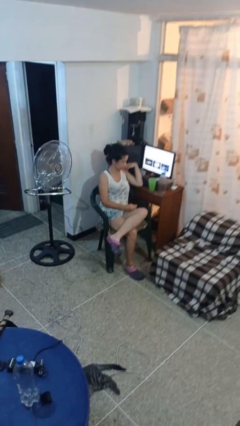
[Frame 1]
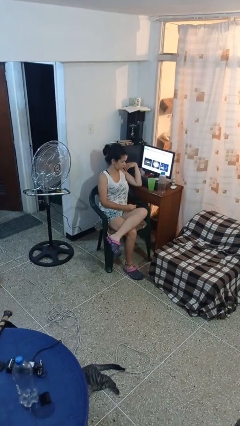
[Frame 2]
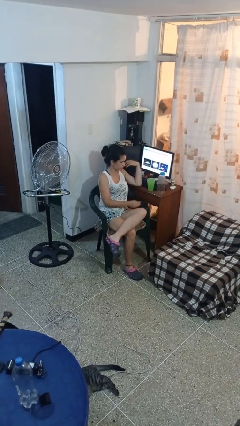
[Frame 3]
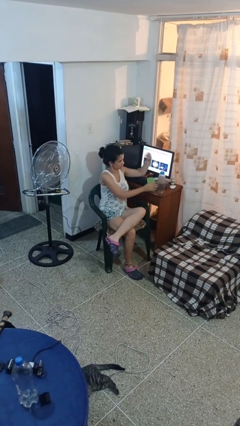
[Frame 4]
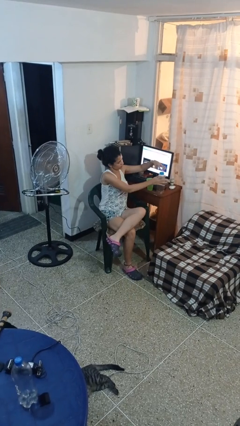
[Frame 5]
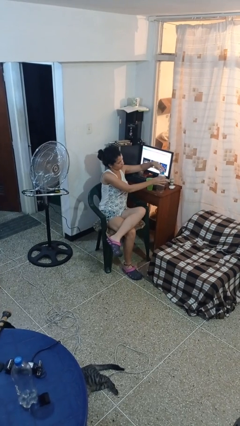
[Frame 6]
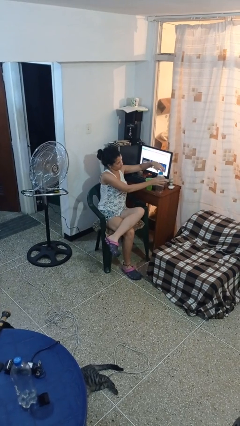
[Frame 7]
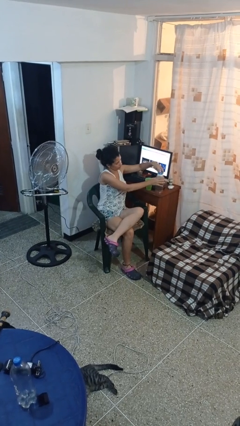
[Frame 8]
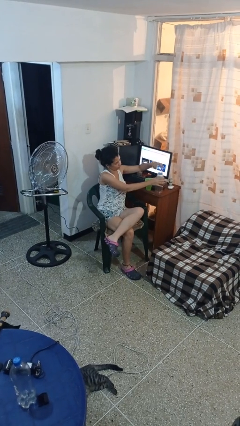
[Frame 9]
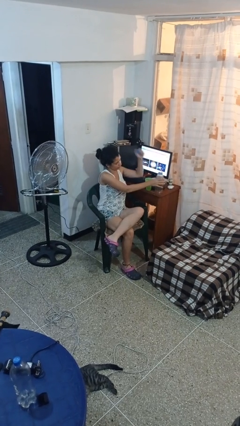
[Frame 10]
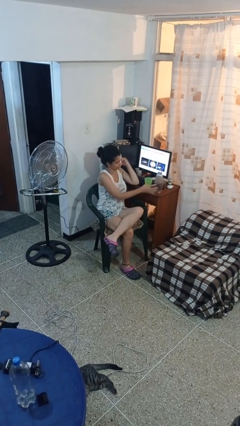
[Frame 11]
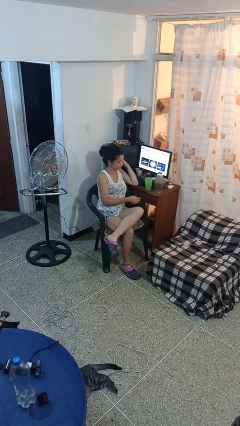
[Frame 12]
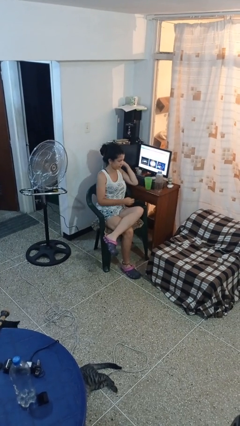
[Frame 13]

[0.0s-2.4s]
person unscrews lid from bottle

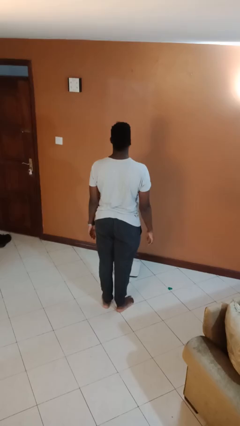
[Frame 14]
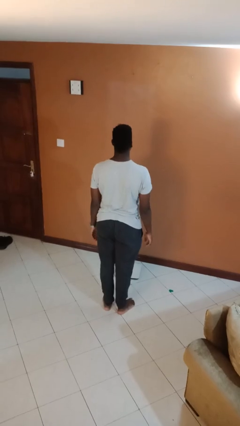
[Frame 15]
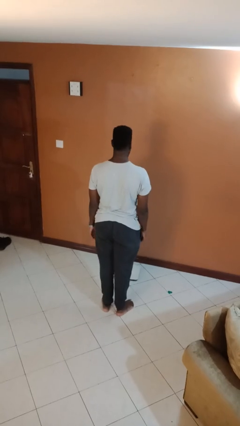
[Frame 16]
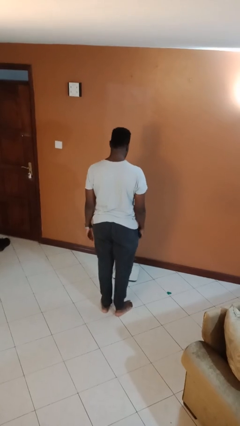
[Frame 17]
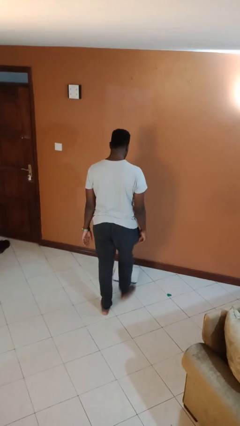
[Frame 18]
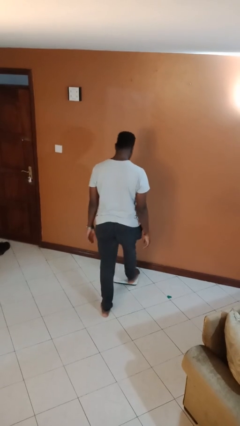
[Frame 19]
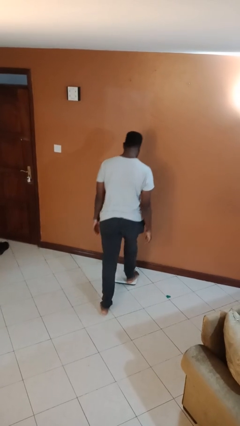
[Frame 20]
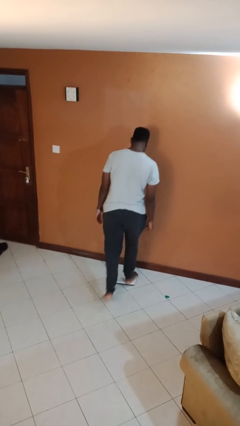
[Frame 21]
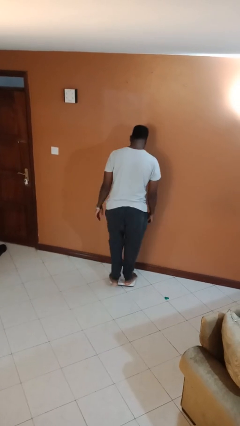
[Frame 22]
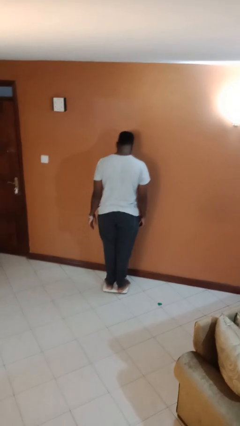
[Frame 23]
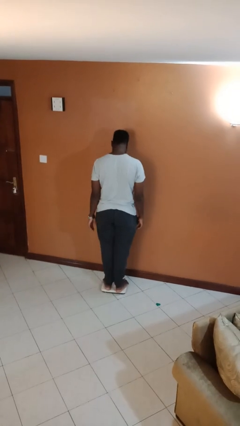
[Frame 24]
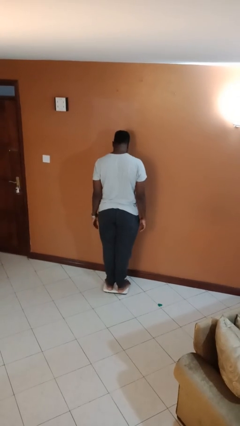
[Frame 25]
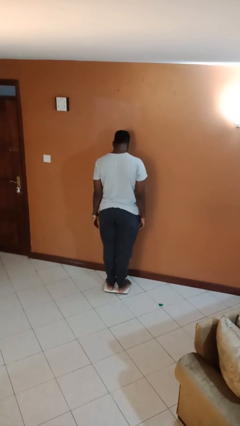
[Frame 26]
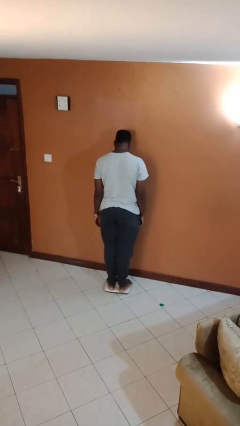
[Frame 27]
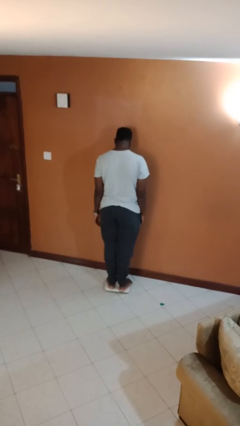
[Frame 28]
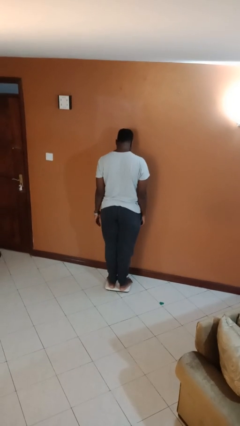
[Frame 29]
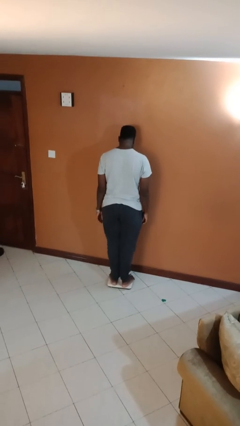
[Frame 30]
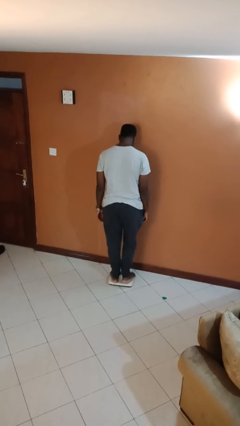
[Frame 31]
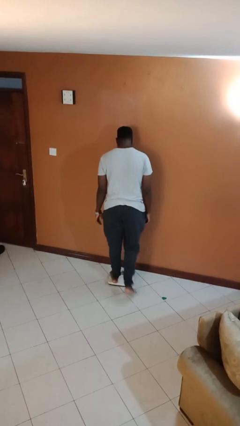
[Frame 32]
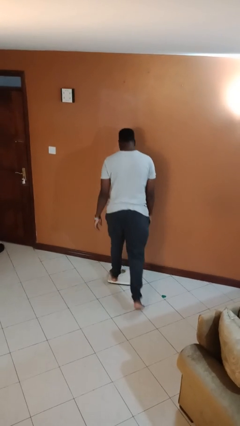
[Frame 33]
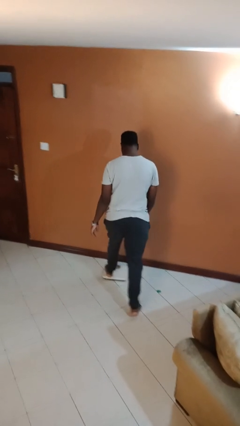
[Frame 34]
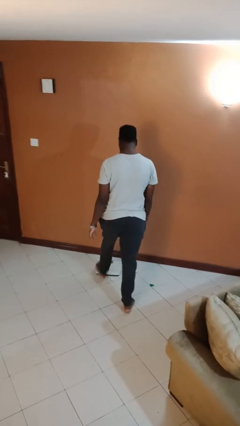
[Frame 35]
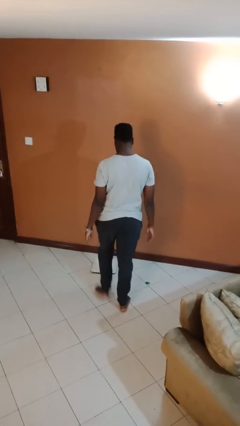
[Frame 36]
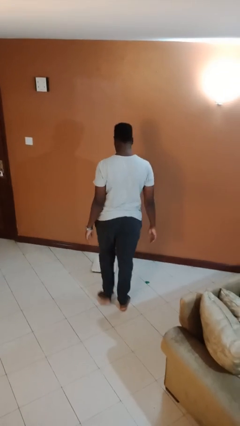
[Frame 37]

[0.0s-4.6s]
person uses bodyweight scale

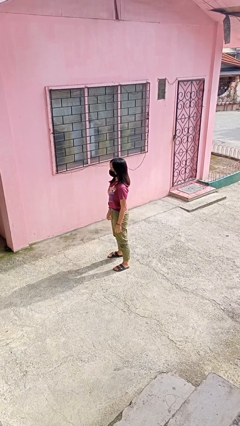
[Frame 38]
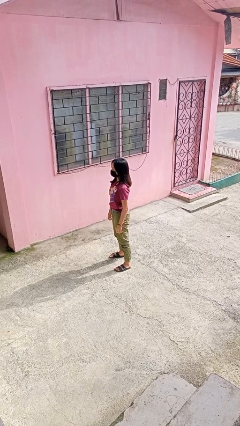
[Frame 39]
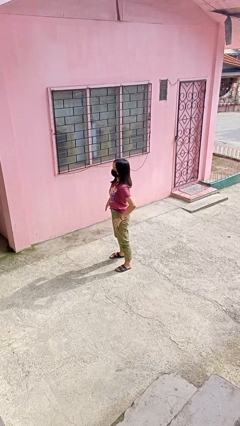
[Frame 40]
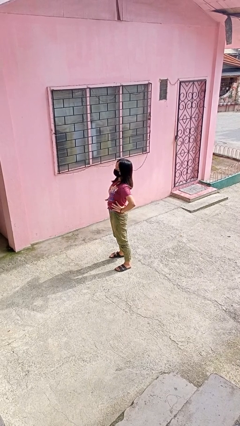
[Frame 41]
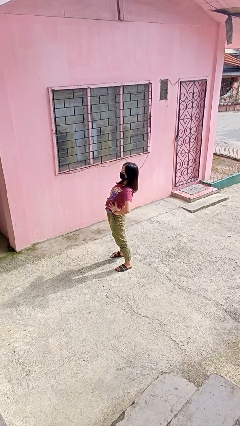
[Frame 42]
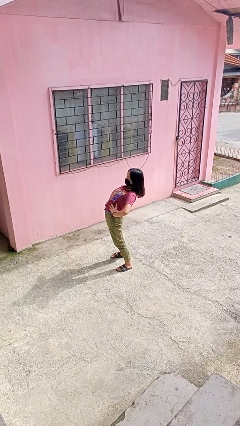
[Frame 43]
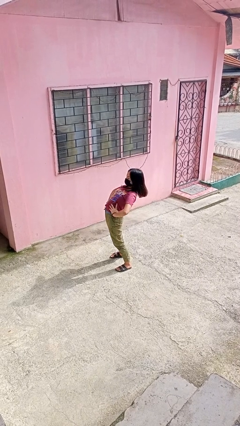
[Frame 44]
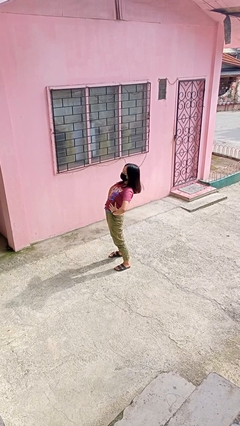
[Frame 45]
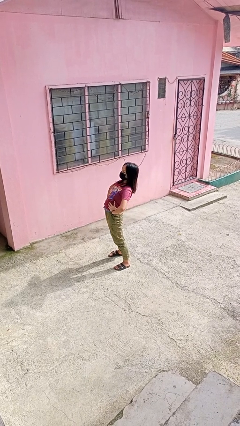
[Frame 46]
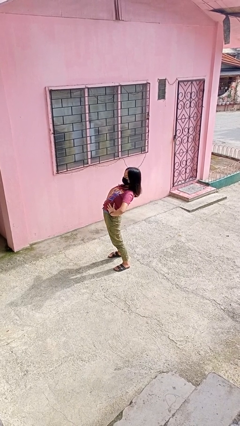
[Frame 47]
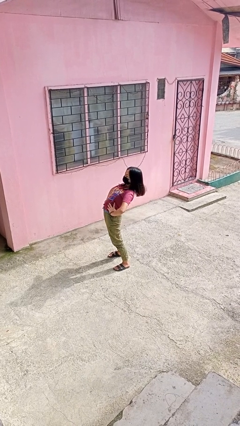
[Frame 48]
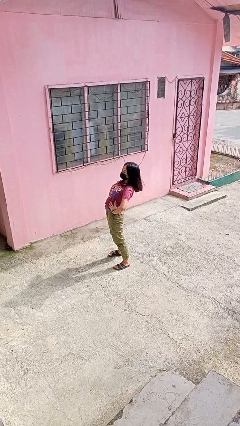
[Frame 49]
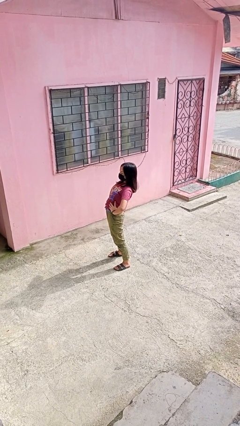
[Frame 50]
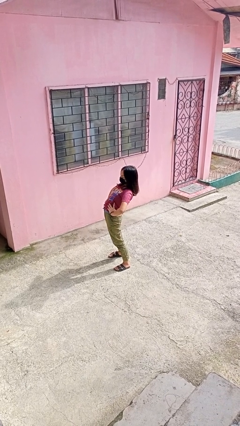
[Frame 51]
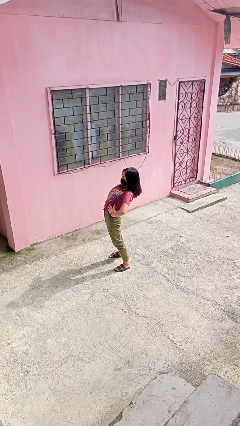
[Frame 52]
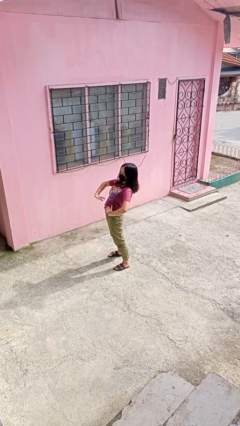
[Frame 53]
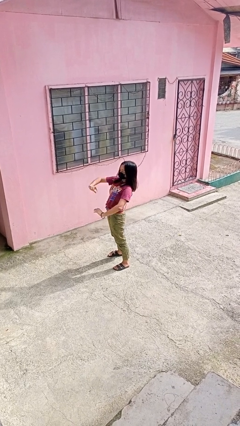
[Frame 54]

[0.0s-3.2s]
person stretches back

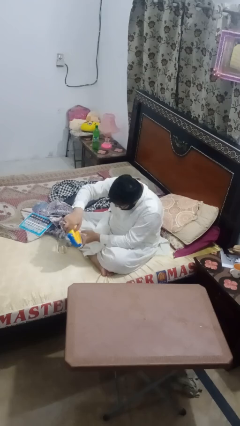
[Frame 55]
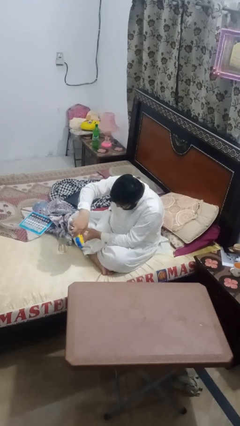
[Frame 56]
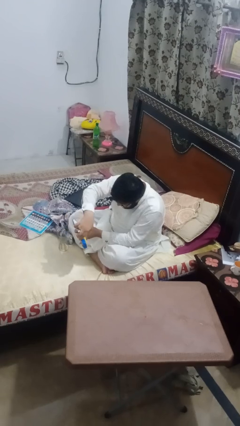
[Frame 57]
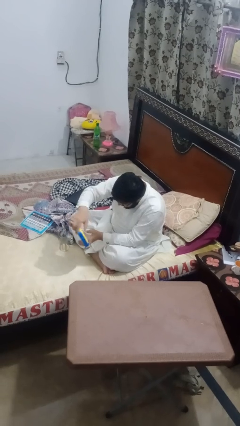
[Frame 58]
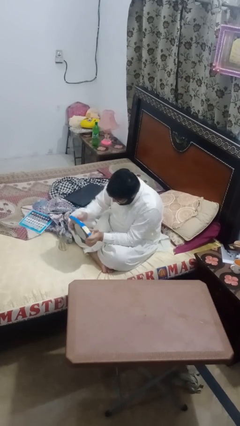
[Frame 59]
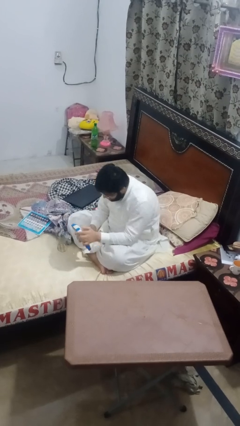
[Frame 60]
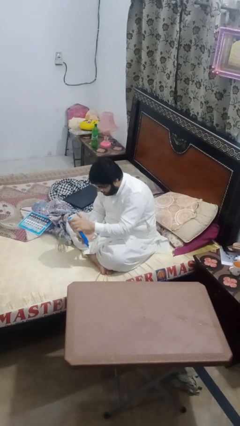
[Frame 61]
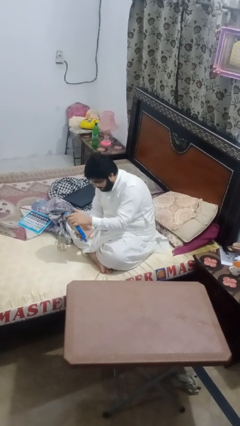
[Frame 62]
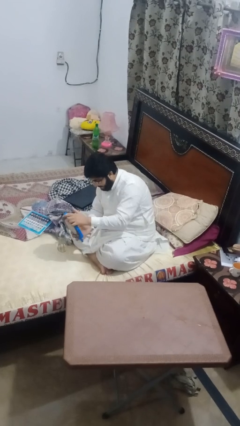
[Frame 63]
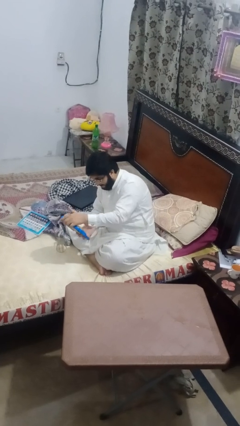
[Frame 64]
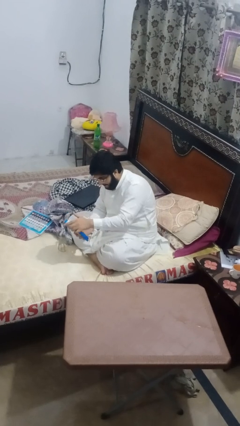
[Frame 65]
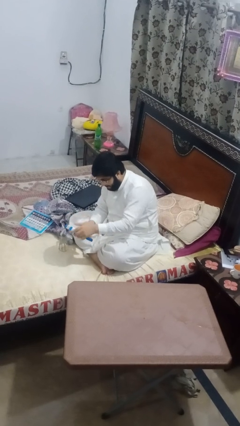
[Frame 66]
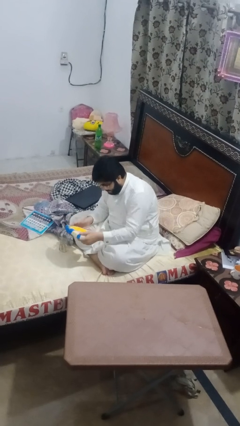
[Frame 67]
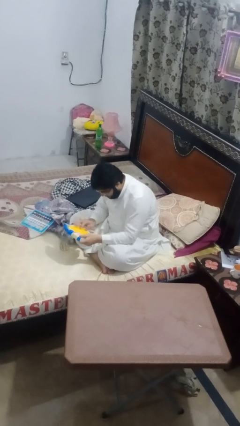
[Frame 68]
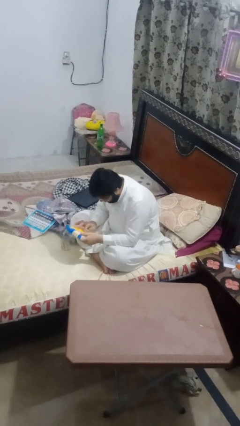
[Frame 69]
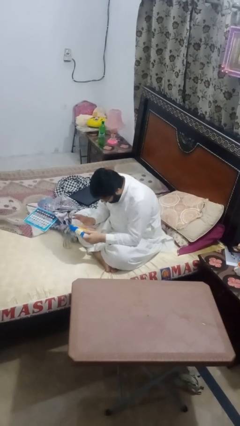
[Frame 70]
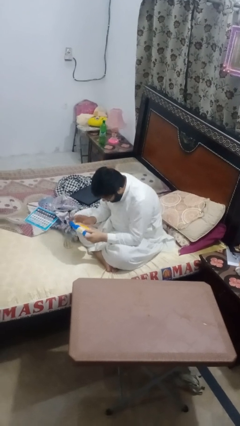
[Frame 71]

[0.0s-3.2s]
person interacts with handheld game

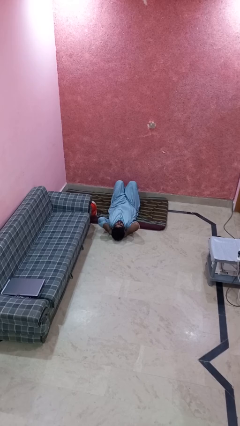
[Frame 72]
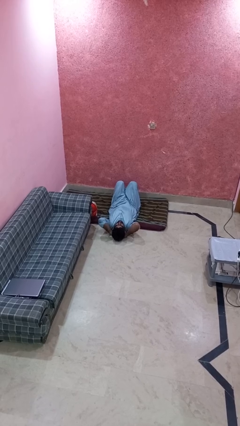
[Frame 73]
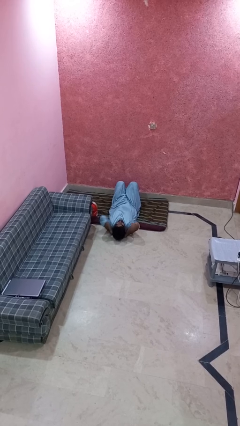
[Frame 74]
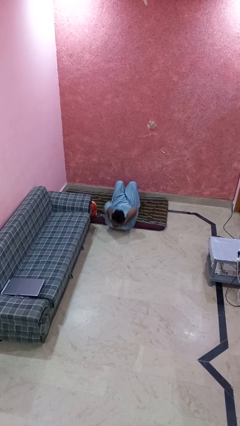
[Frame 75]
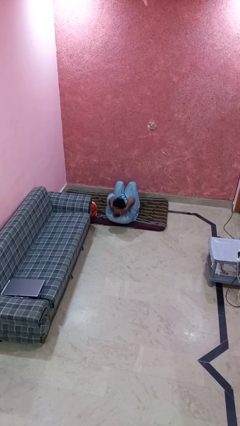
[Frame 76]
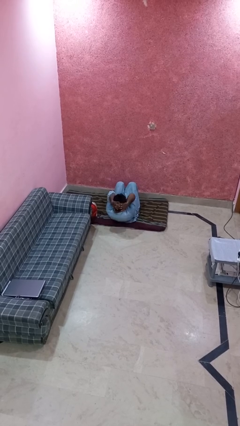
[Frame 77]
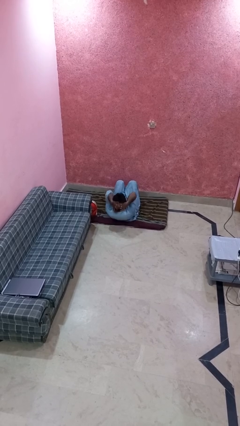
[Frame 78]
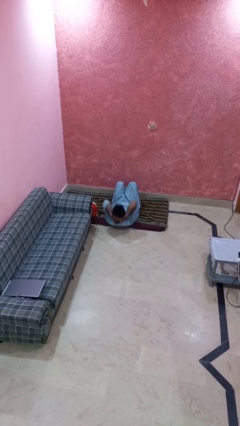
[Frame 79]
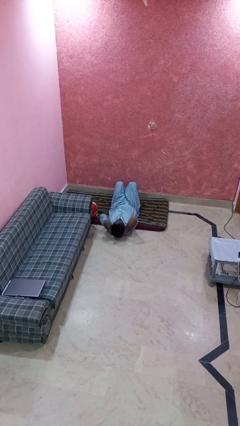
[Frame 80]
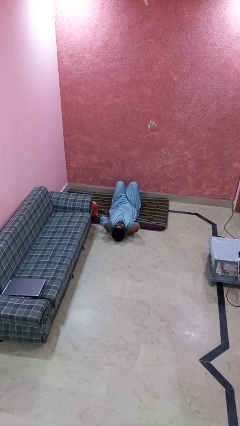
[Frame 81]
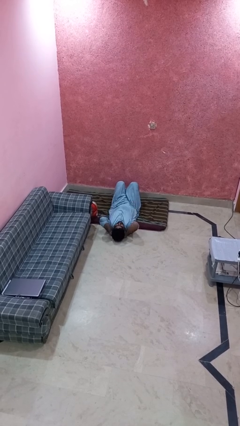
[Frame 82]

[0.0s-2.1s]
person exercises with situp

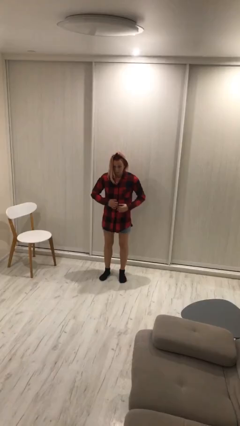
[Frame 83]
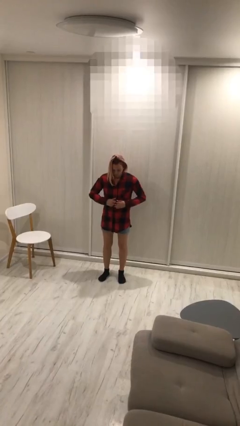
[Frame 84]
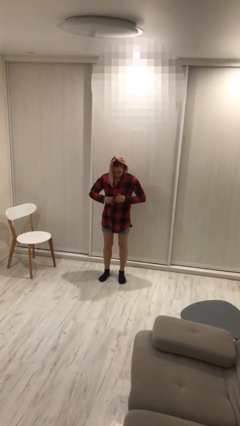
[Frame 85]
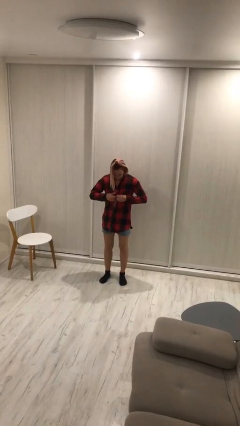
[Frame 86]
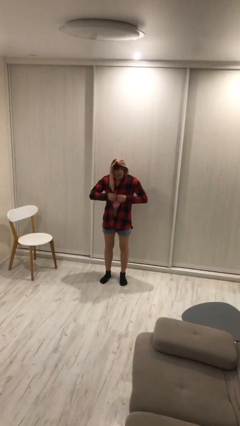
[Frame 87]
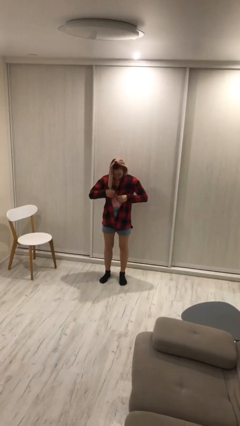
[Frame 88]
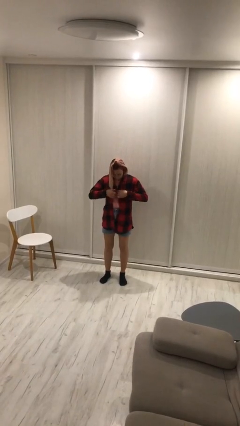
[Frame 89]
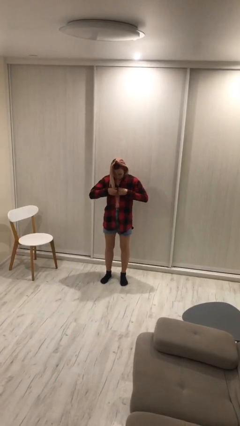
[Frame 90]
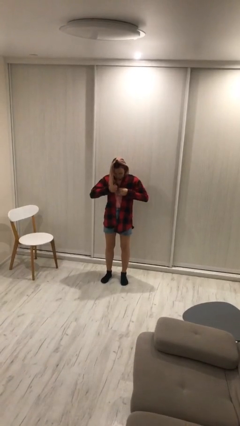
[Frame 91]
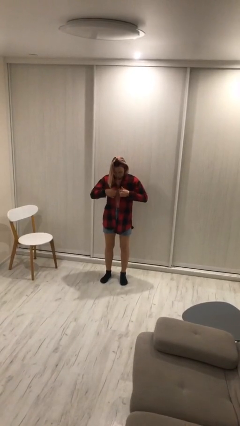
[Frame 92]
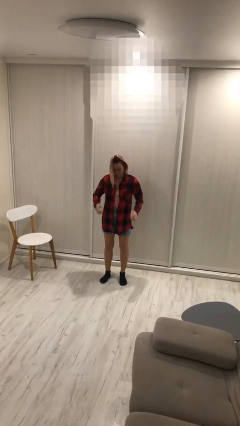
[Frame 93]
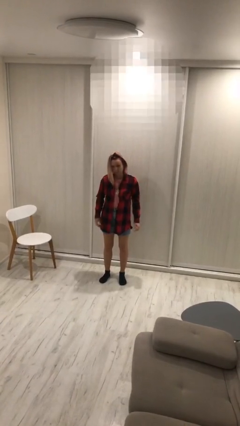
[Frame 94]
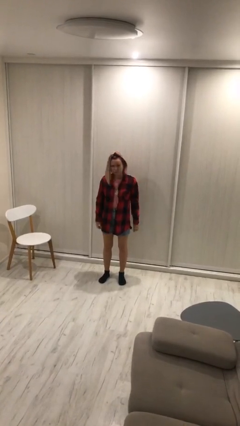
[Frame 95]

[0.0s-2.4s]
person unbuttons shirt
